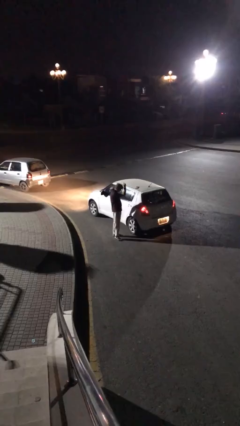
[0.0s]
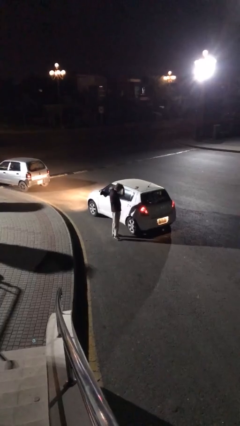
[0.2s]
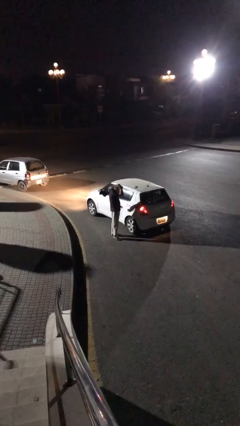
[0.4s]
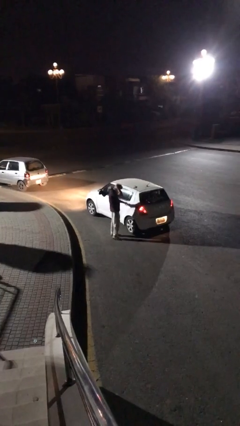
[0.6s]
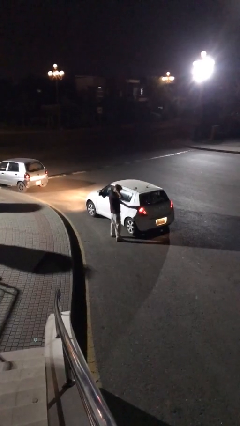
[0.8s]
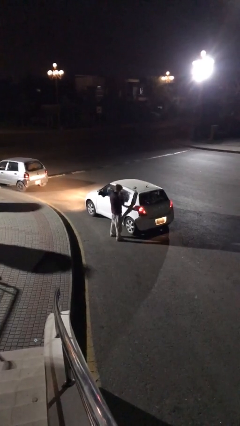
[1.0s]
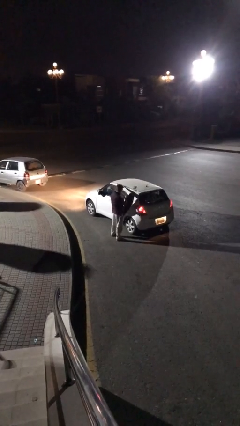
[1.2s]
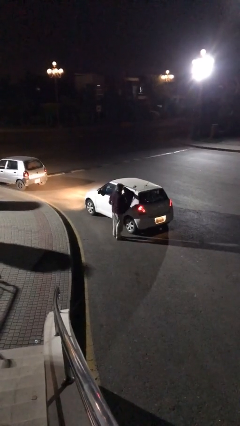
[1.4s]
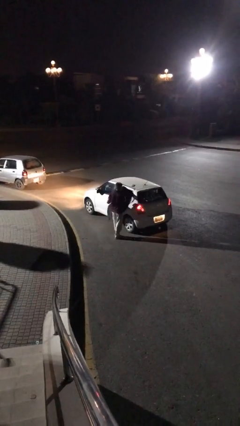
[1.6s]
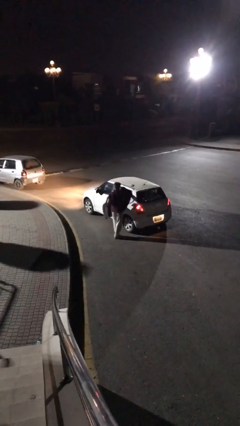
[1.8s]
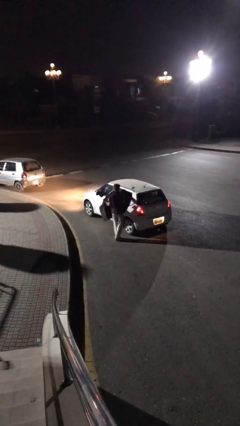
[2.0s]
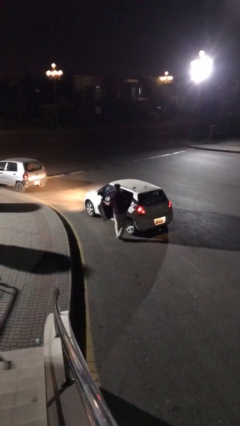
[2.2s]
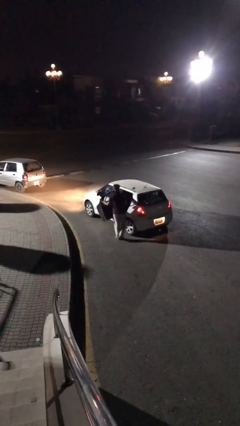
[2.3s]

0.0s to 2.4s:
person opens car door

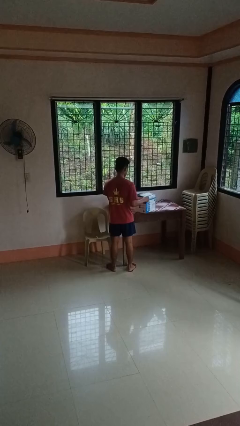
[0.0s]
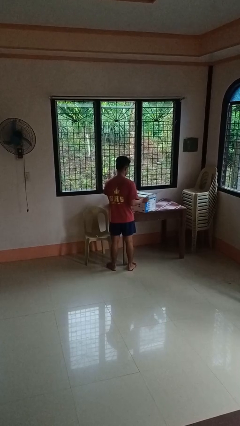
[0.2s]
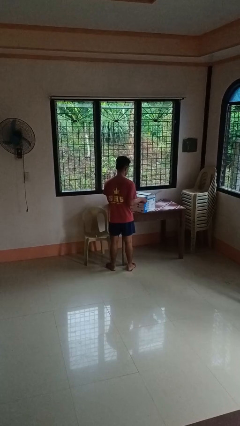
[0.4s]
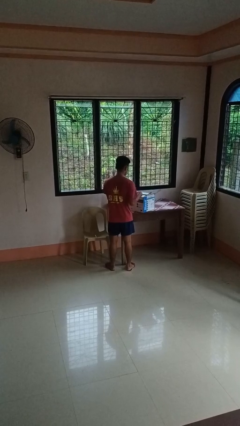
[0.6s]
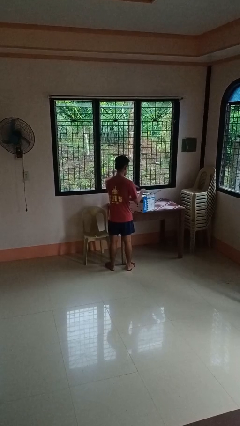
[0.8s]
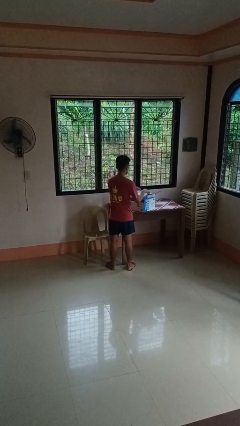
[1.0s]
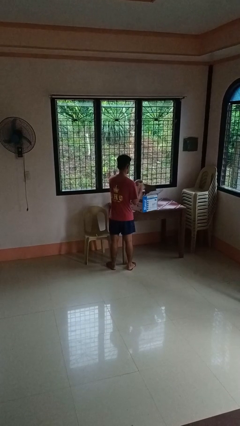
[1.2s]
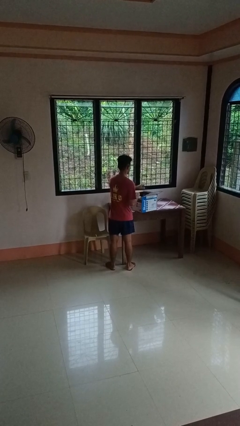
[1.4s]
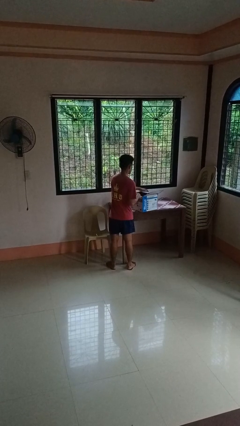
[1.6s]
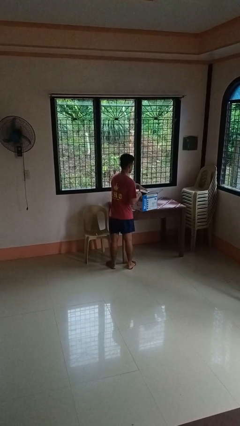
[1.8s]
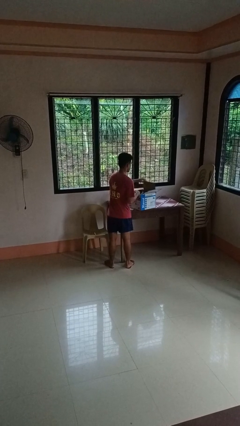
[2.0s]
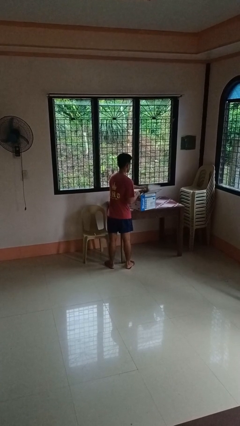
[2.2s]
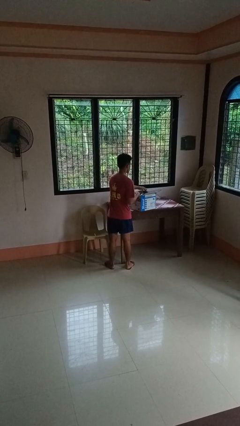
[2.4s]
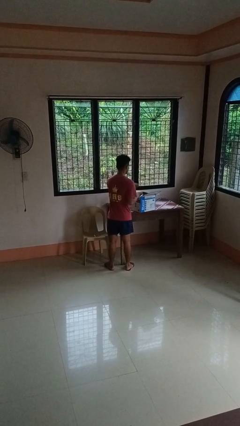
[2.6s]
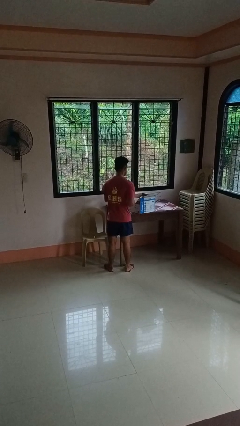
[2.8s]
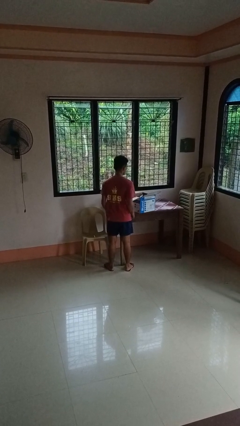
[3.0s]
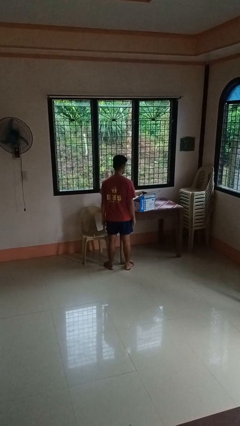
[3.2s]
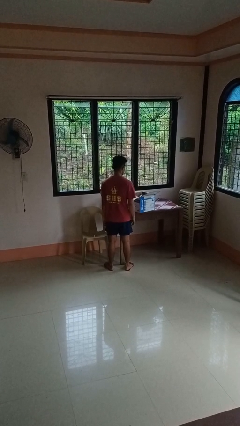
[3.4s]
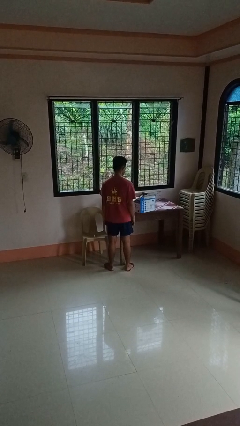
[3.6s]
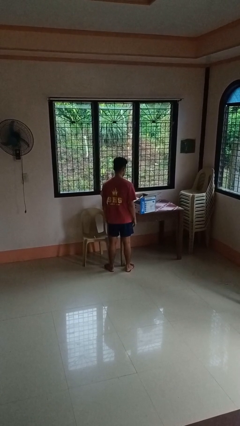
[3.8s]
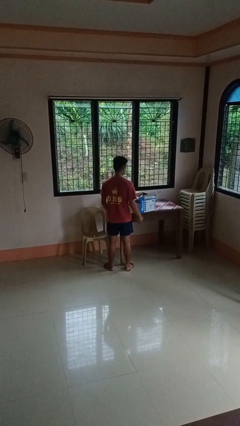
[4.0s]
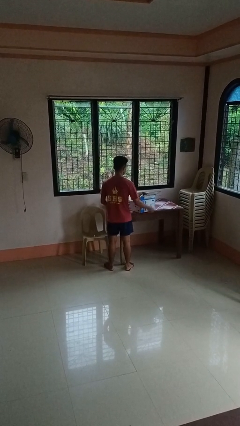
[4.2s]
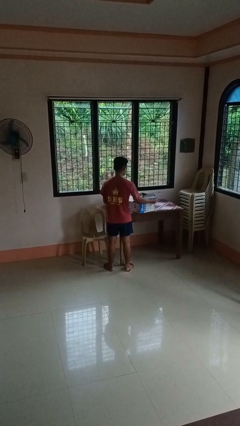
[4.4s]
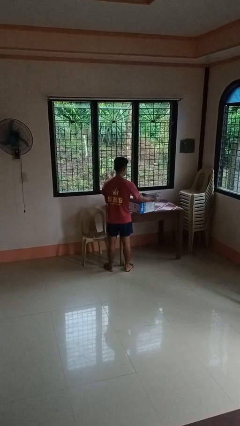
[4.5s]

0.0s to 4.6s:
person opens box

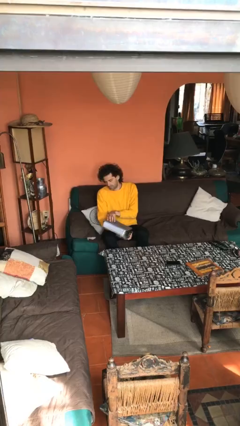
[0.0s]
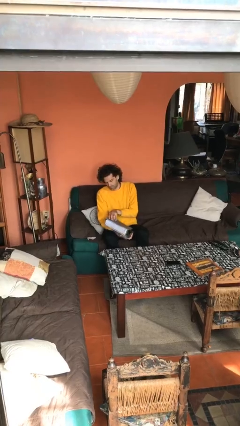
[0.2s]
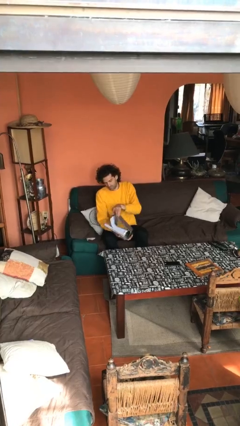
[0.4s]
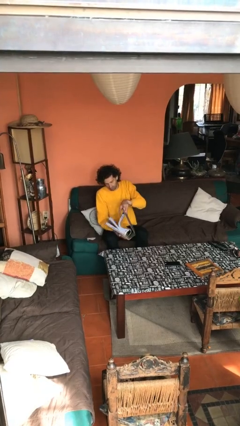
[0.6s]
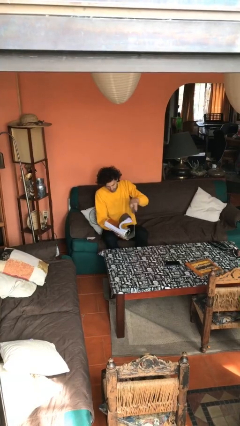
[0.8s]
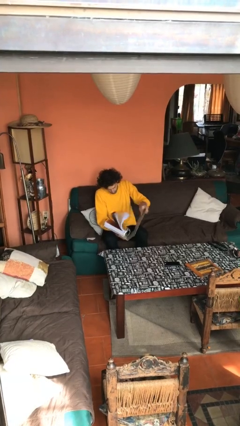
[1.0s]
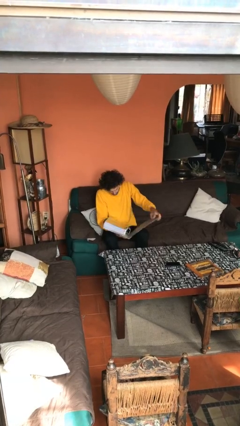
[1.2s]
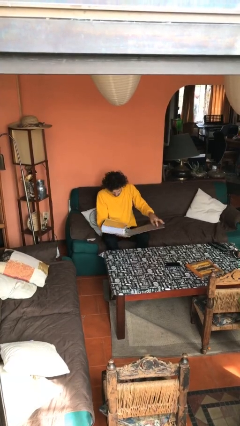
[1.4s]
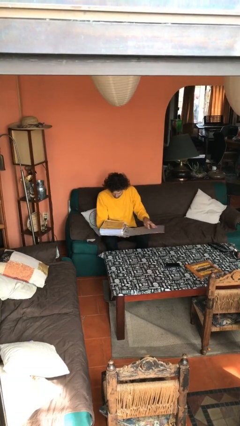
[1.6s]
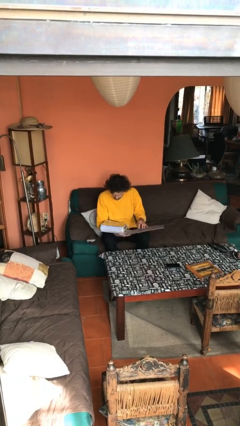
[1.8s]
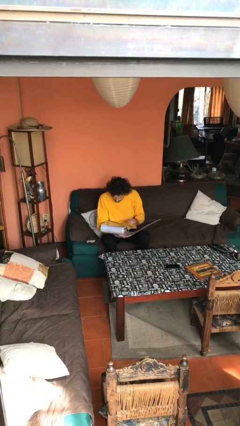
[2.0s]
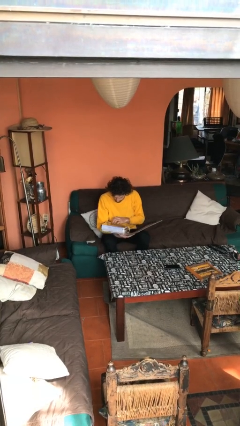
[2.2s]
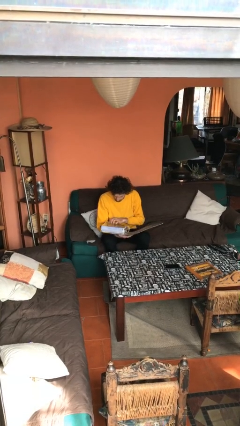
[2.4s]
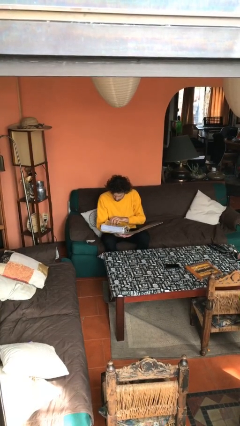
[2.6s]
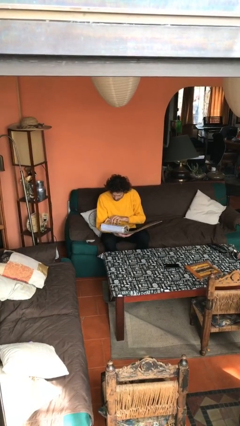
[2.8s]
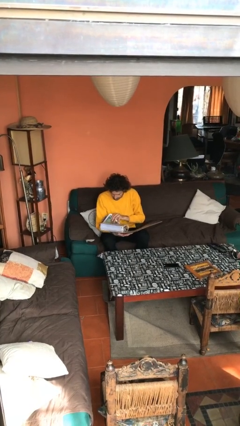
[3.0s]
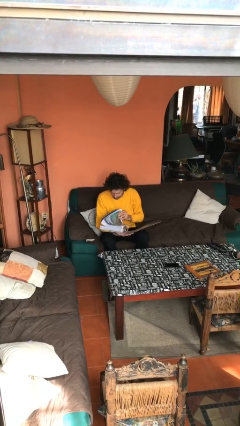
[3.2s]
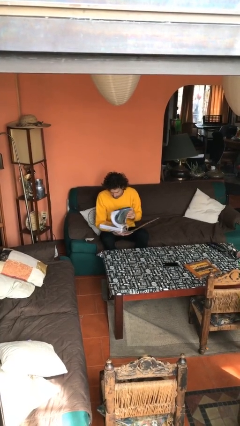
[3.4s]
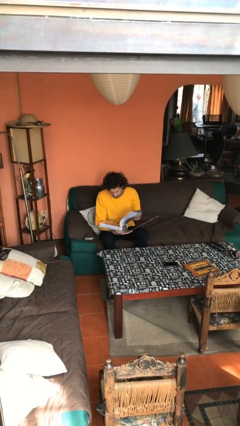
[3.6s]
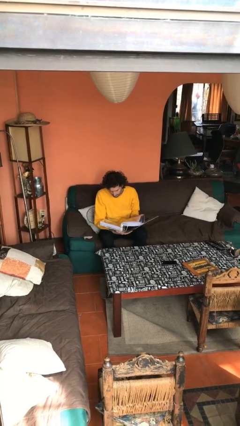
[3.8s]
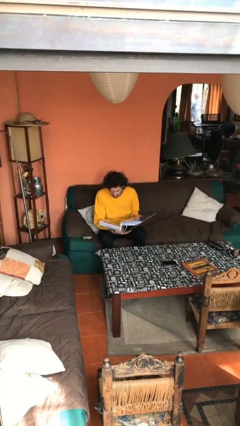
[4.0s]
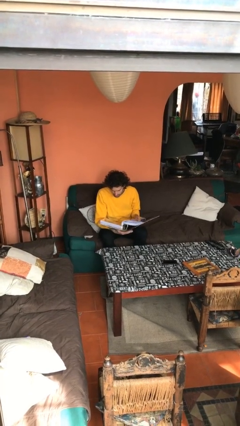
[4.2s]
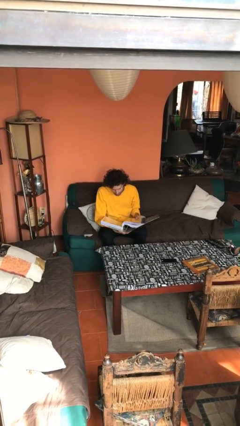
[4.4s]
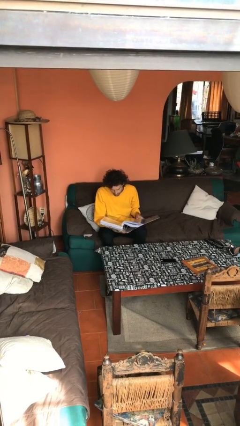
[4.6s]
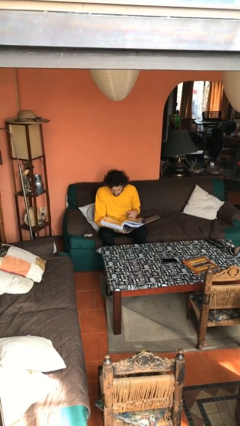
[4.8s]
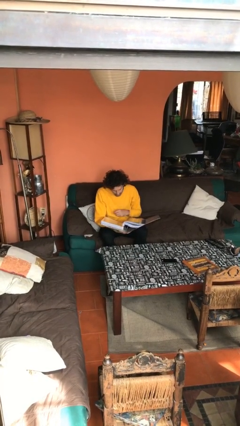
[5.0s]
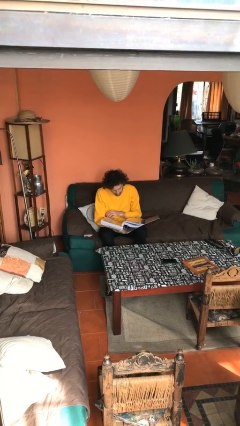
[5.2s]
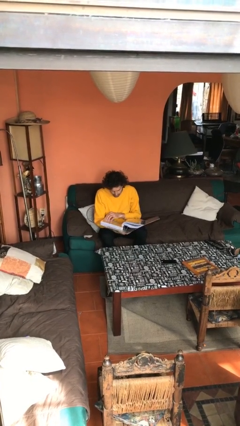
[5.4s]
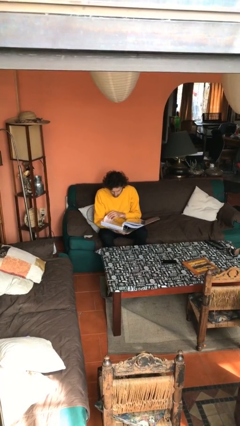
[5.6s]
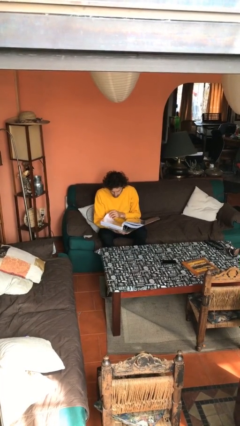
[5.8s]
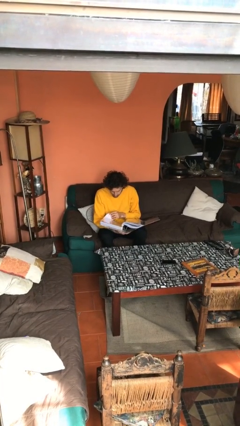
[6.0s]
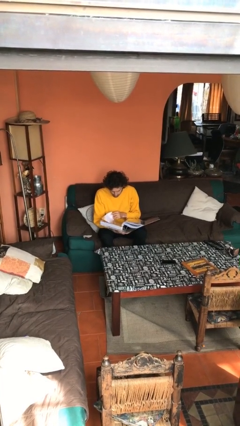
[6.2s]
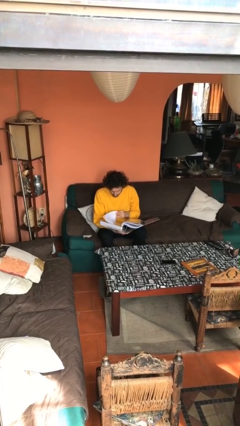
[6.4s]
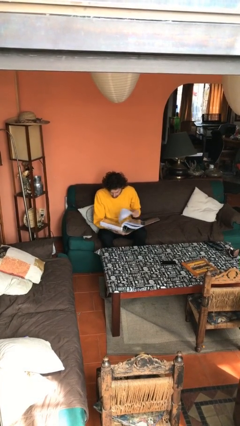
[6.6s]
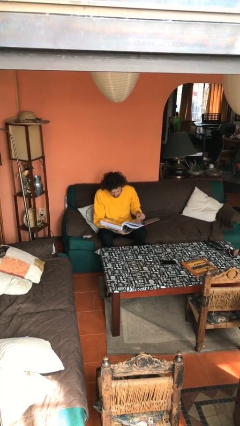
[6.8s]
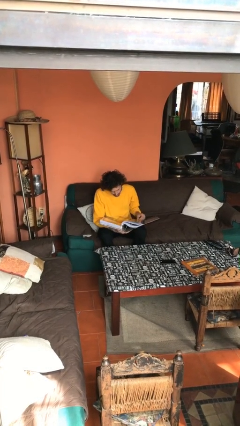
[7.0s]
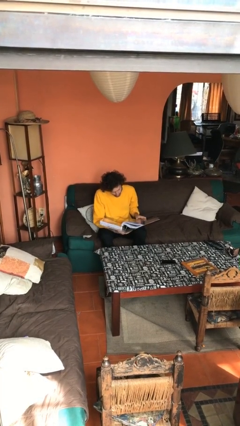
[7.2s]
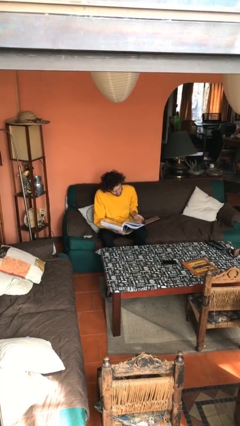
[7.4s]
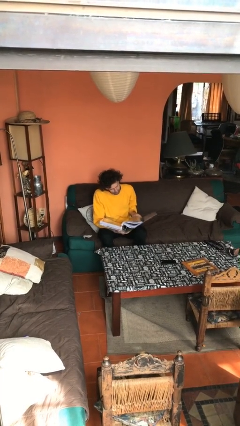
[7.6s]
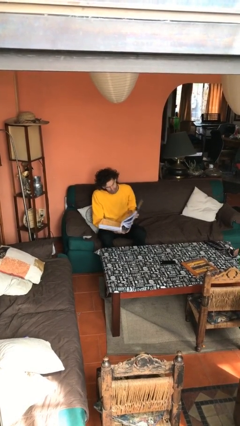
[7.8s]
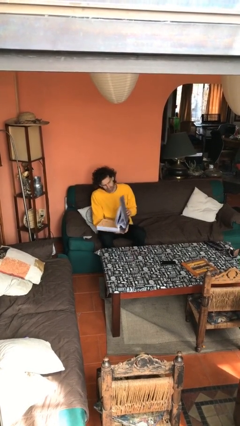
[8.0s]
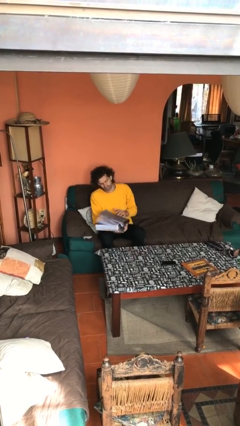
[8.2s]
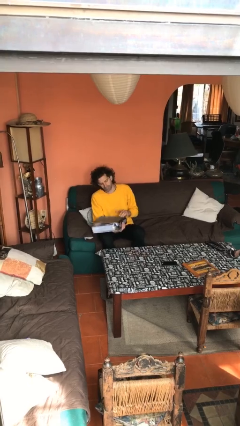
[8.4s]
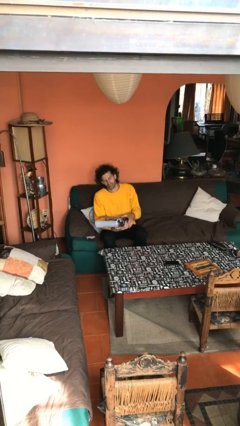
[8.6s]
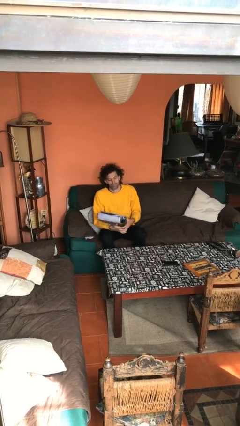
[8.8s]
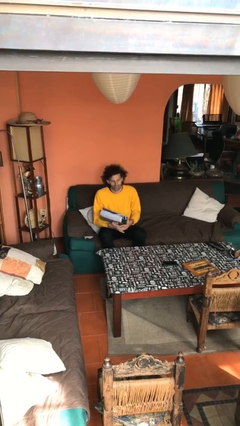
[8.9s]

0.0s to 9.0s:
person reads document

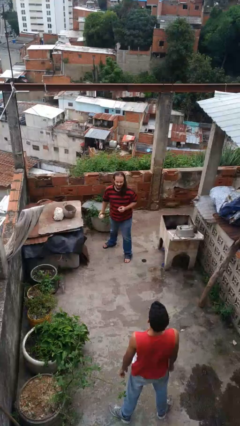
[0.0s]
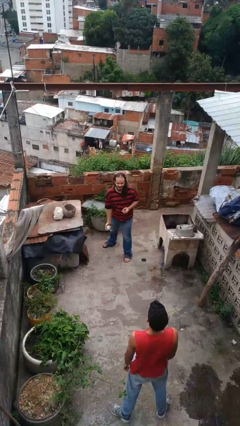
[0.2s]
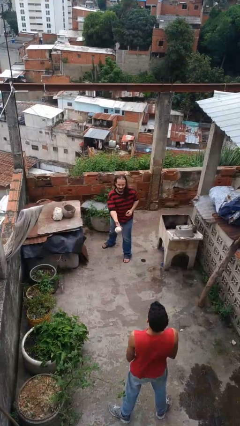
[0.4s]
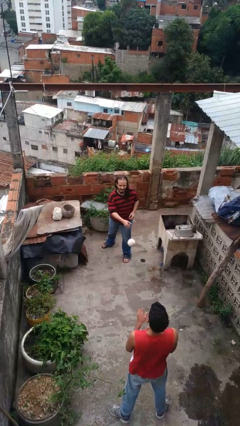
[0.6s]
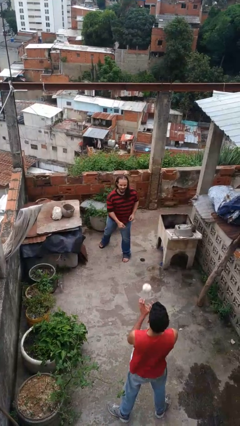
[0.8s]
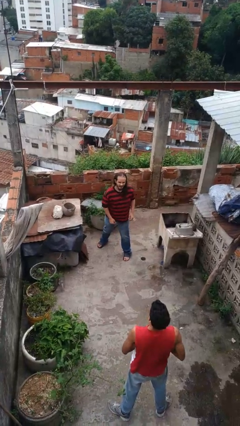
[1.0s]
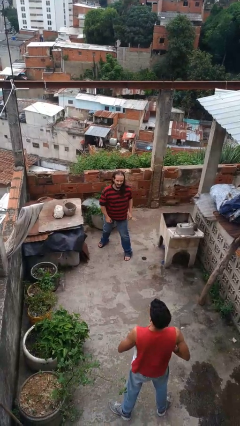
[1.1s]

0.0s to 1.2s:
person throws object to person

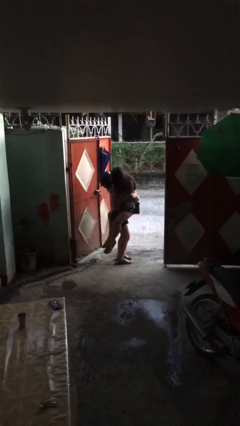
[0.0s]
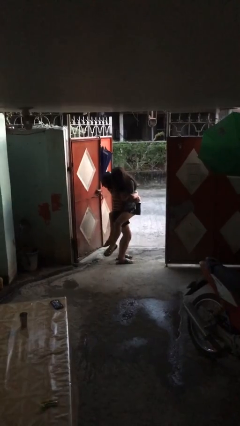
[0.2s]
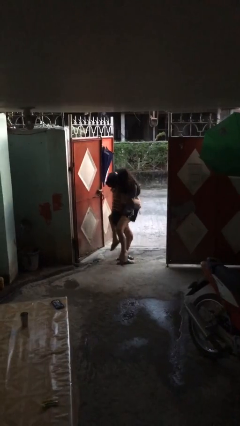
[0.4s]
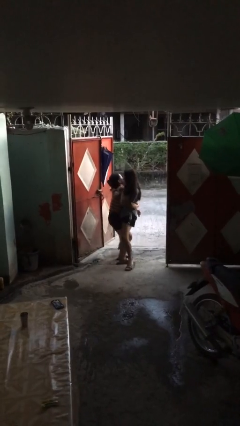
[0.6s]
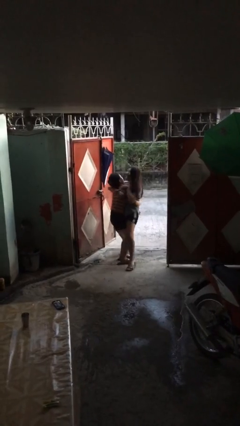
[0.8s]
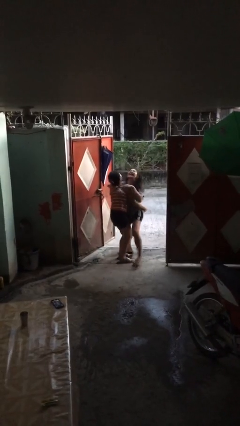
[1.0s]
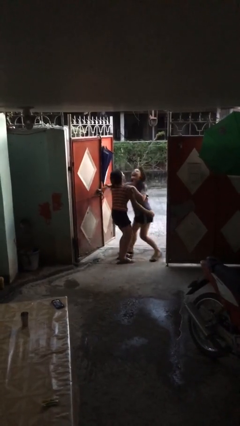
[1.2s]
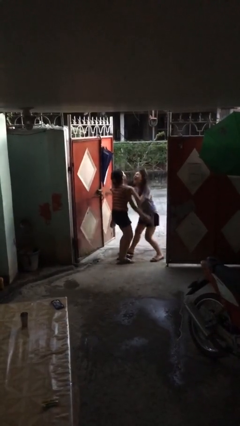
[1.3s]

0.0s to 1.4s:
person puts down person
